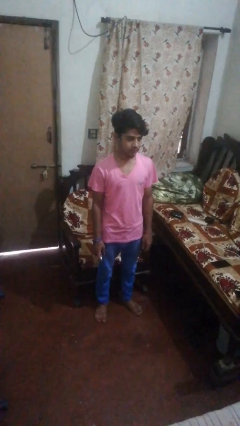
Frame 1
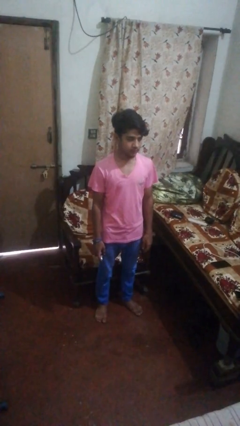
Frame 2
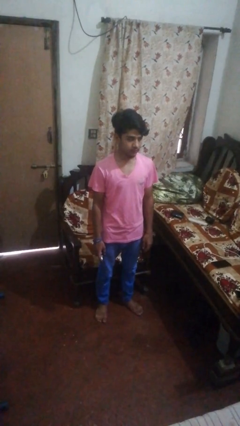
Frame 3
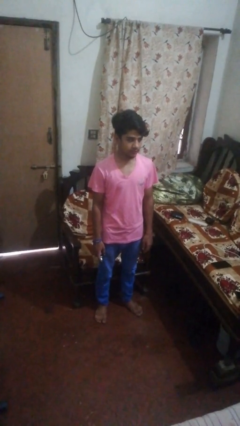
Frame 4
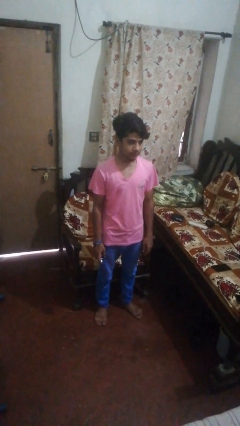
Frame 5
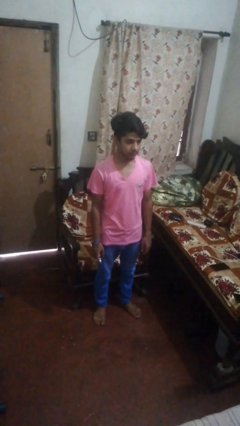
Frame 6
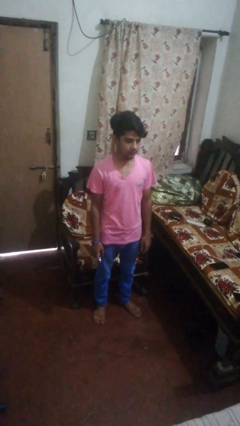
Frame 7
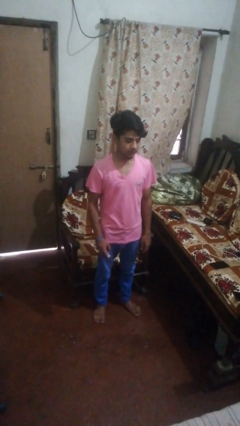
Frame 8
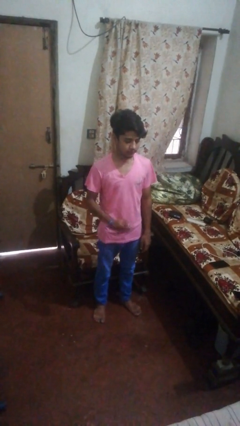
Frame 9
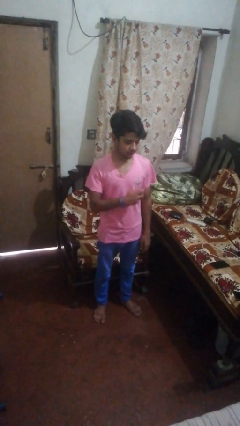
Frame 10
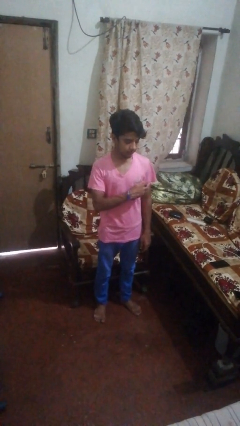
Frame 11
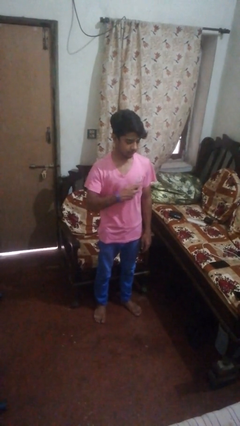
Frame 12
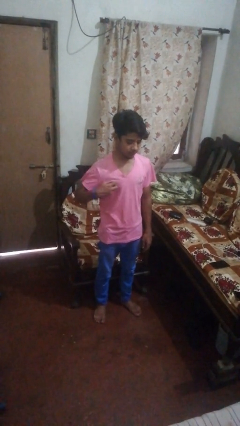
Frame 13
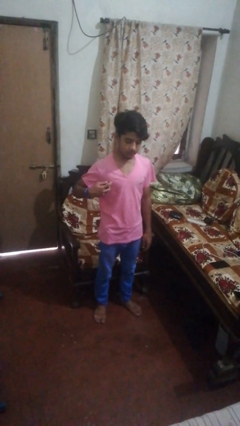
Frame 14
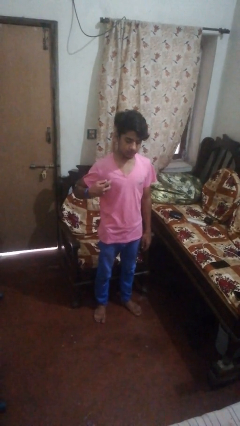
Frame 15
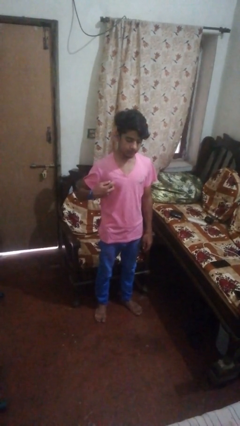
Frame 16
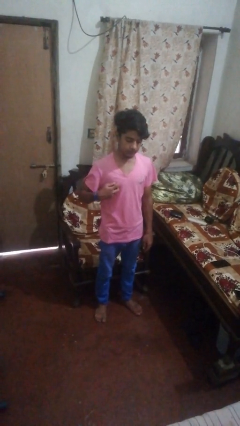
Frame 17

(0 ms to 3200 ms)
person applies deodorant

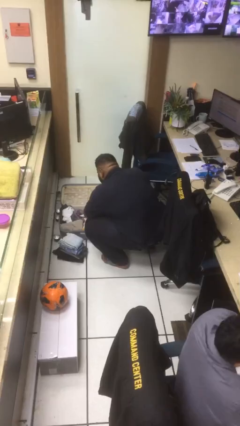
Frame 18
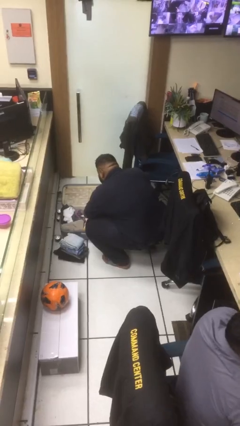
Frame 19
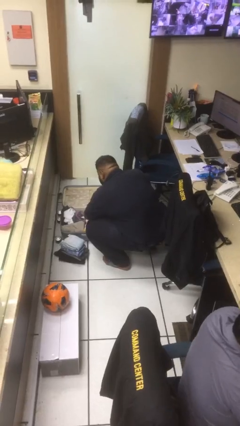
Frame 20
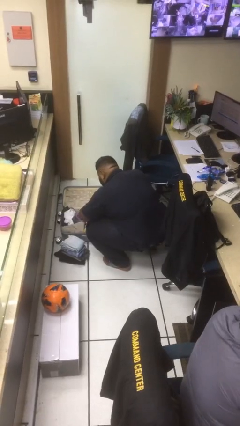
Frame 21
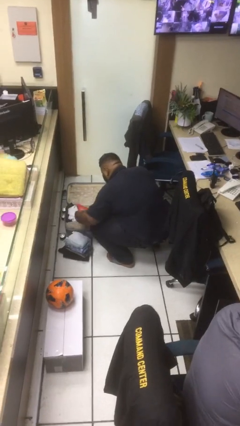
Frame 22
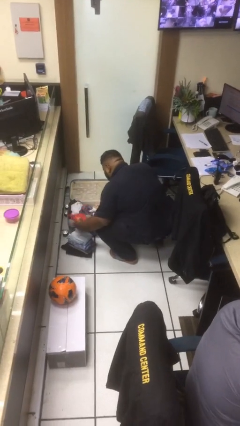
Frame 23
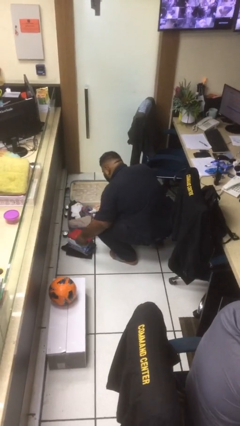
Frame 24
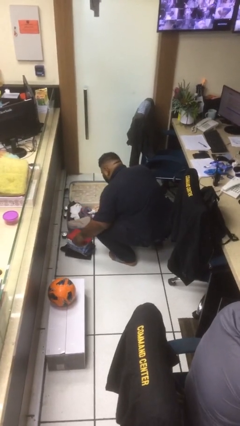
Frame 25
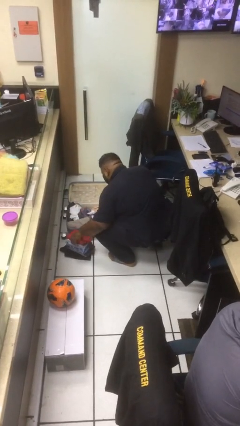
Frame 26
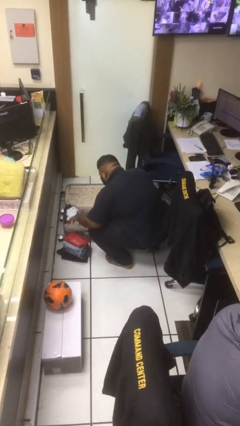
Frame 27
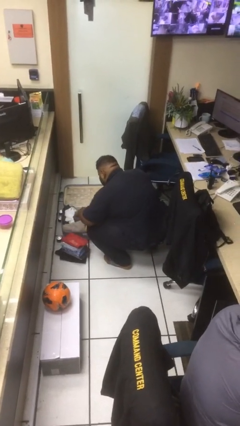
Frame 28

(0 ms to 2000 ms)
person unloads clothes from suitcase

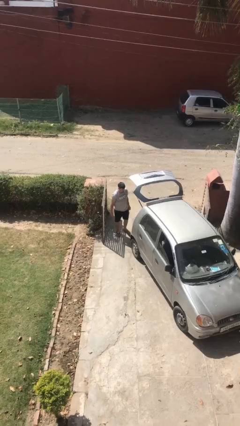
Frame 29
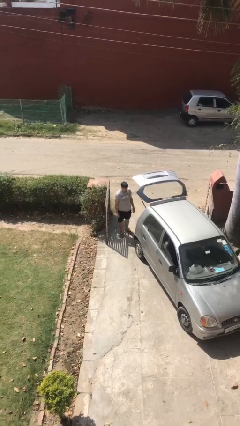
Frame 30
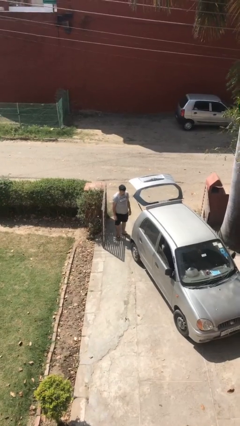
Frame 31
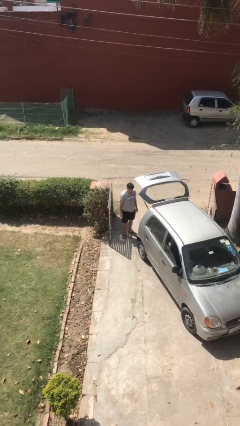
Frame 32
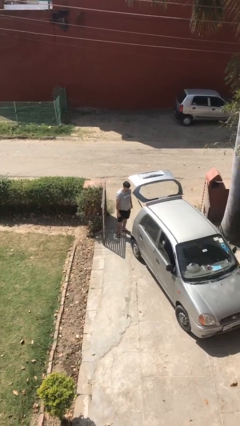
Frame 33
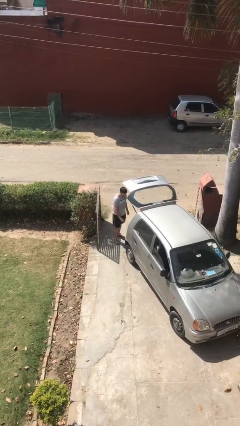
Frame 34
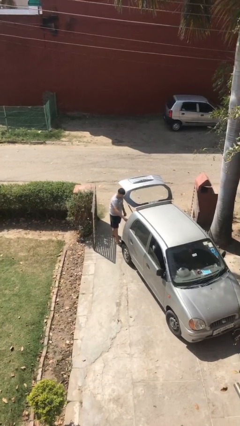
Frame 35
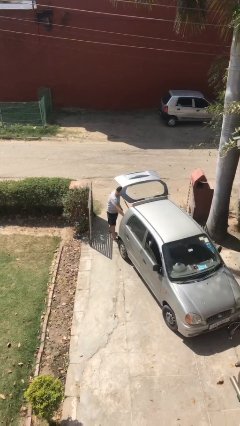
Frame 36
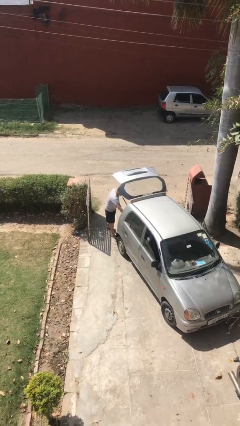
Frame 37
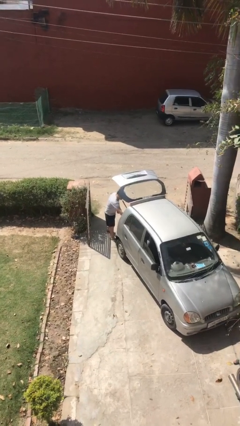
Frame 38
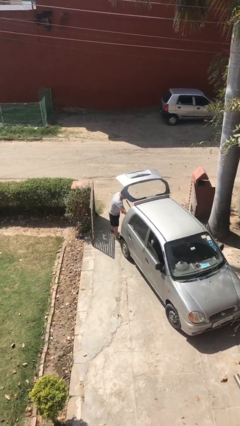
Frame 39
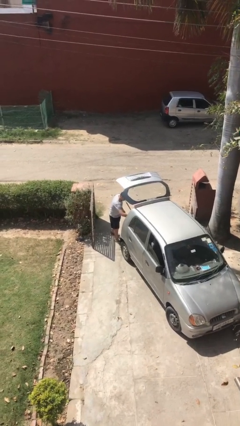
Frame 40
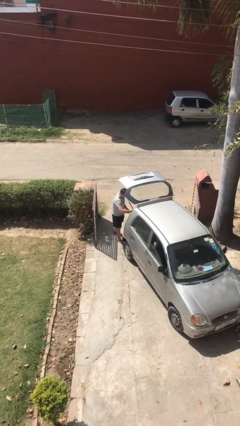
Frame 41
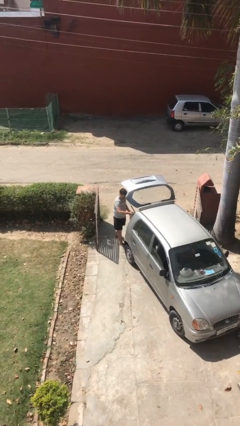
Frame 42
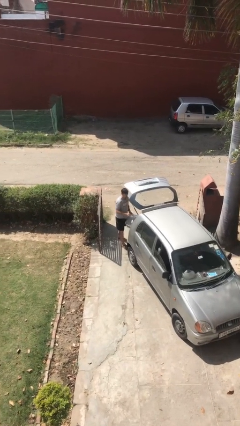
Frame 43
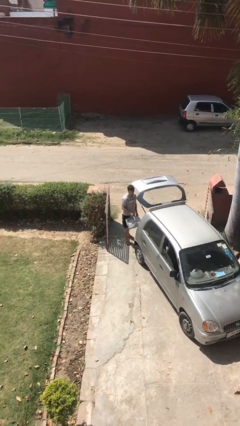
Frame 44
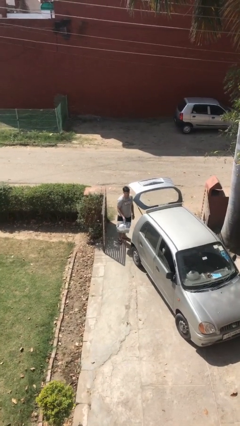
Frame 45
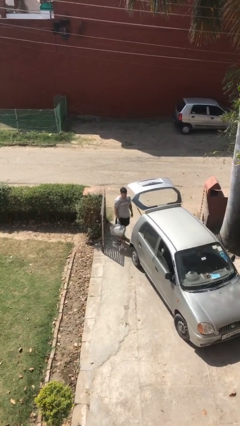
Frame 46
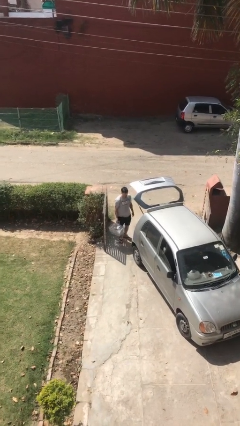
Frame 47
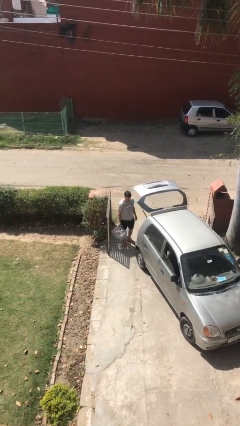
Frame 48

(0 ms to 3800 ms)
person unloads car

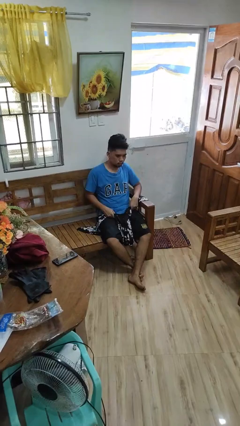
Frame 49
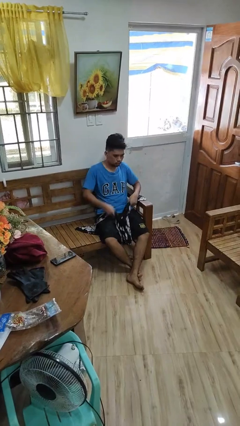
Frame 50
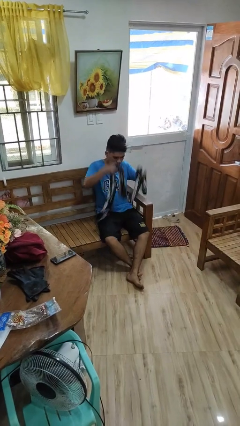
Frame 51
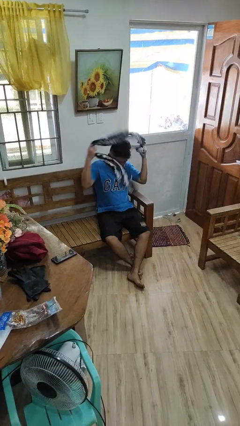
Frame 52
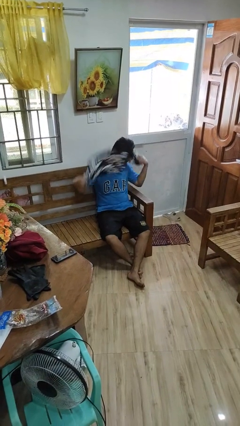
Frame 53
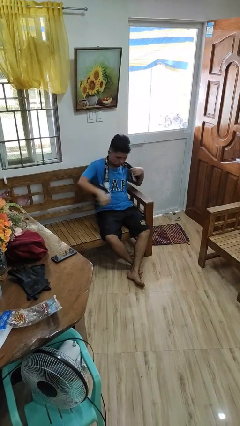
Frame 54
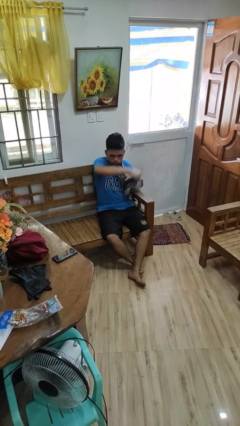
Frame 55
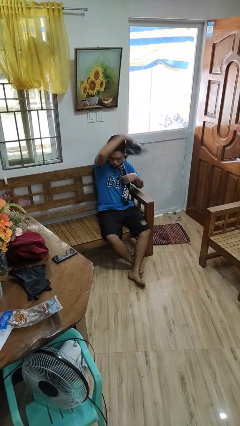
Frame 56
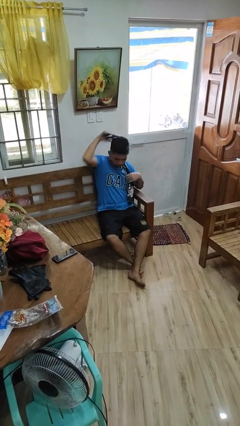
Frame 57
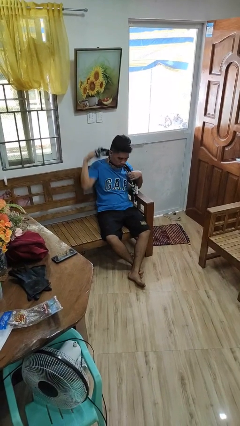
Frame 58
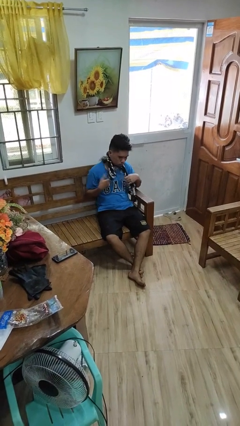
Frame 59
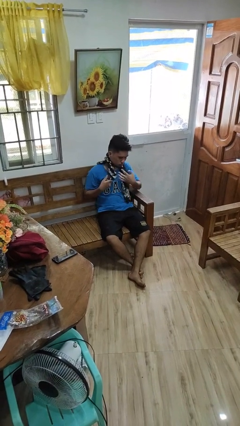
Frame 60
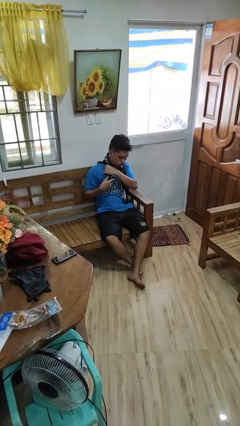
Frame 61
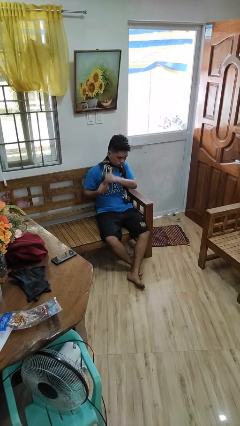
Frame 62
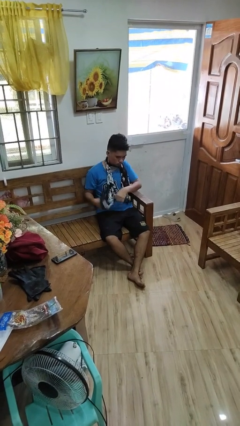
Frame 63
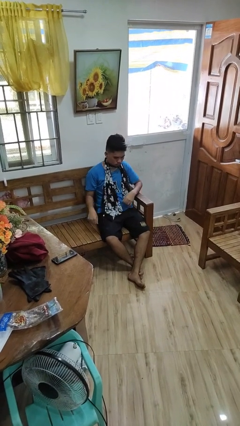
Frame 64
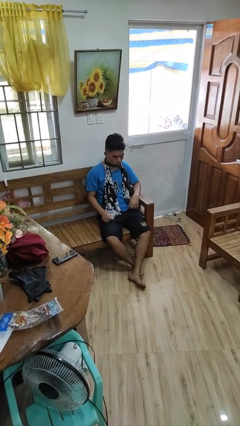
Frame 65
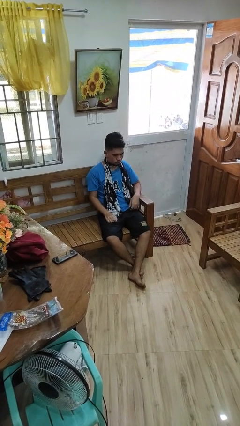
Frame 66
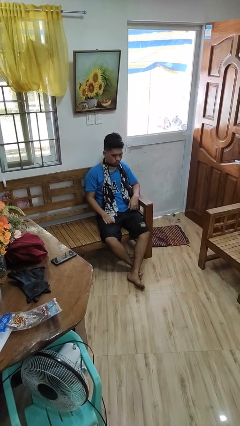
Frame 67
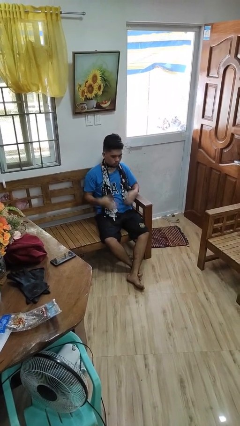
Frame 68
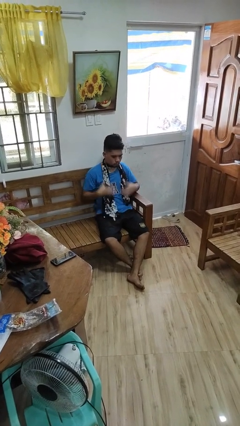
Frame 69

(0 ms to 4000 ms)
person puts on scarf

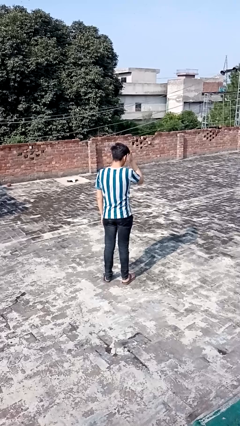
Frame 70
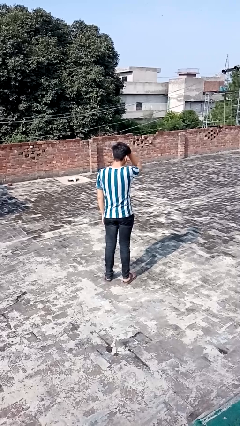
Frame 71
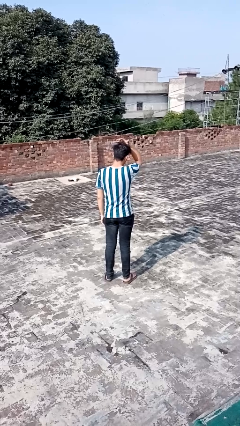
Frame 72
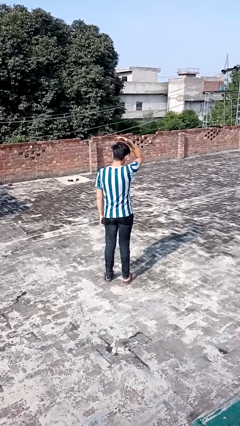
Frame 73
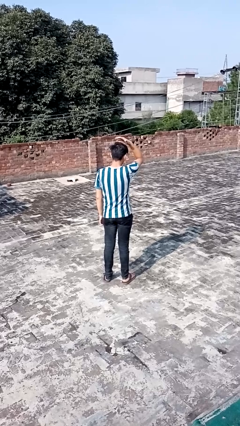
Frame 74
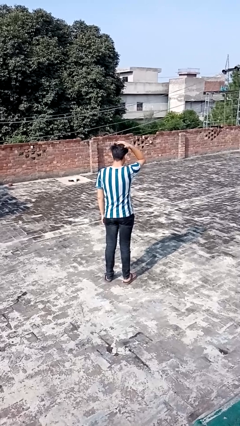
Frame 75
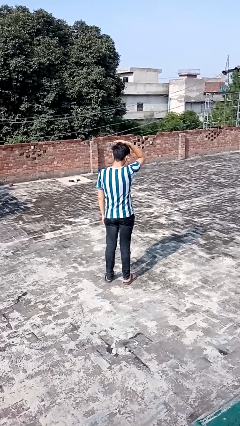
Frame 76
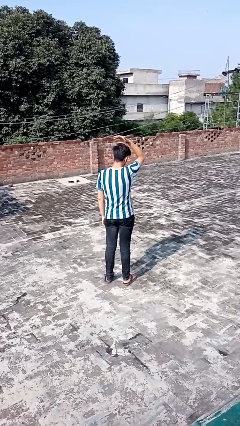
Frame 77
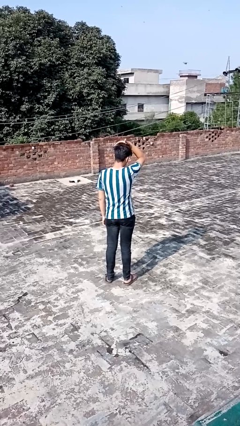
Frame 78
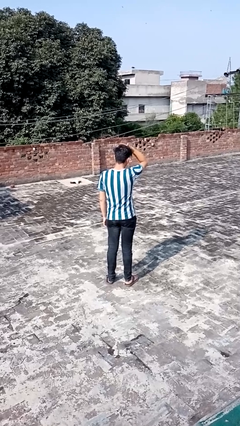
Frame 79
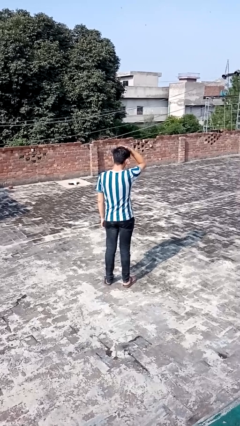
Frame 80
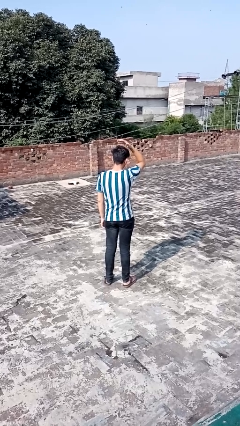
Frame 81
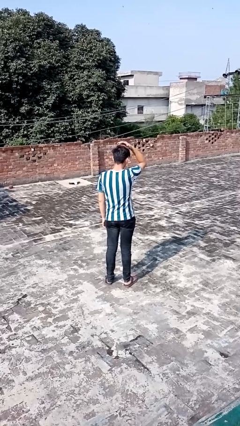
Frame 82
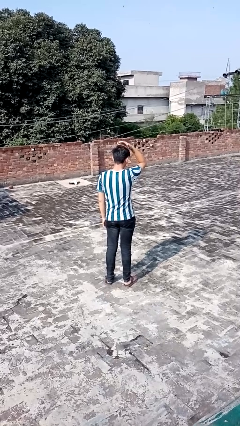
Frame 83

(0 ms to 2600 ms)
person pats head

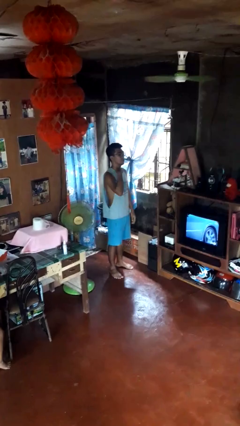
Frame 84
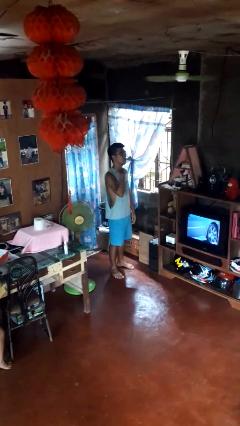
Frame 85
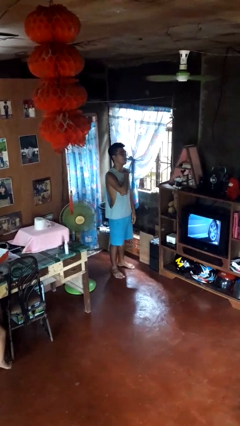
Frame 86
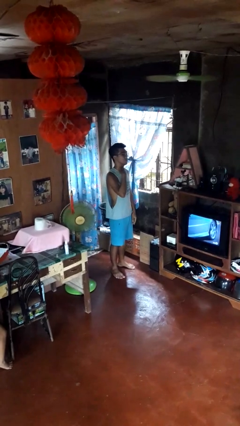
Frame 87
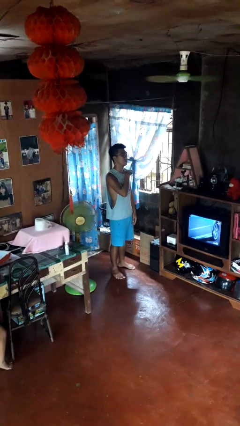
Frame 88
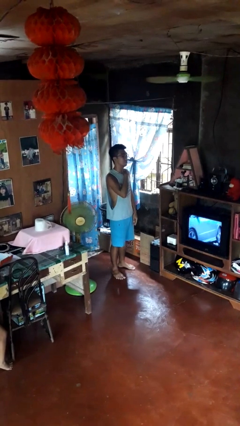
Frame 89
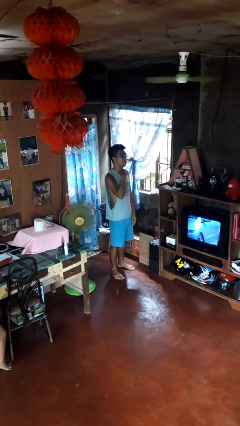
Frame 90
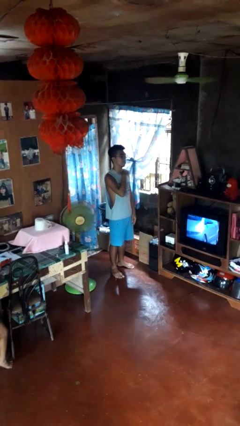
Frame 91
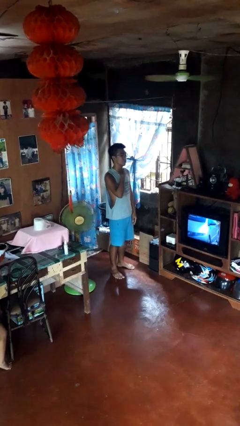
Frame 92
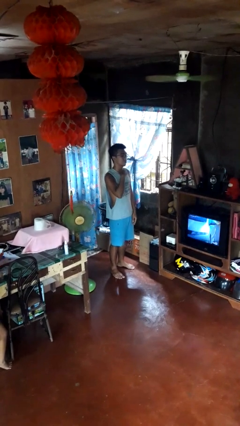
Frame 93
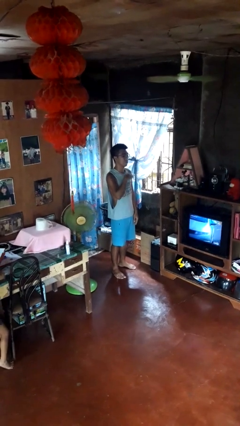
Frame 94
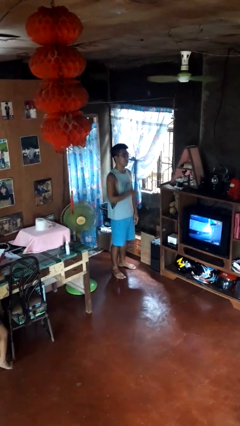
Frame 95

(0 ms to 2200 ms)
person gestures cut
